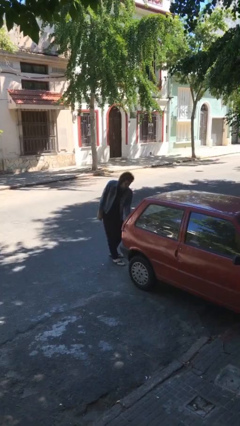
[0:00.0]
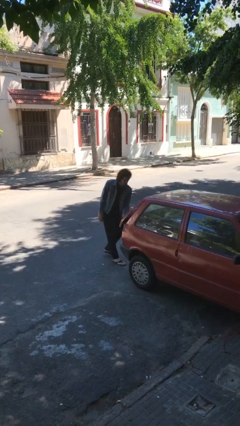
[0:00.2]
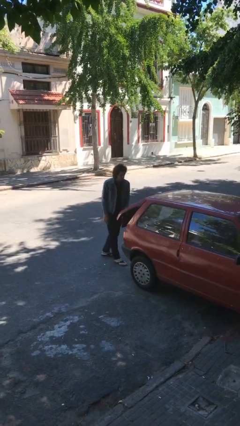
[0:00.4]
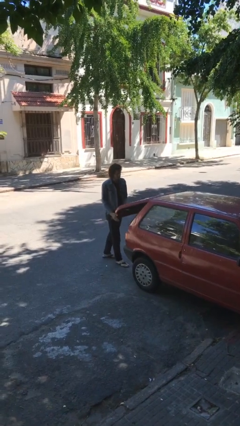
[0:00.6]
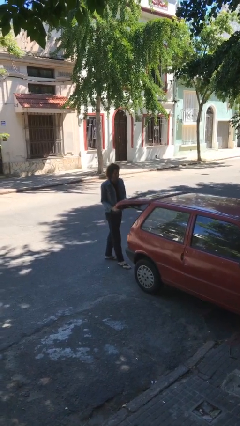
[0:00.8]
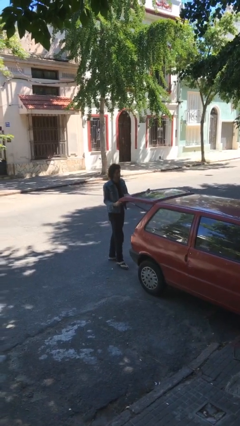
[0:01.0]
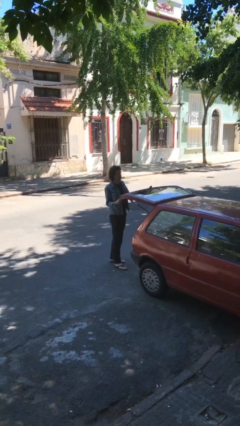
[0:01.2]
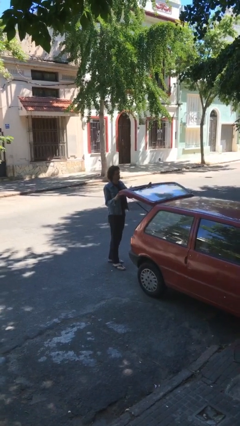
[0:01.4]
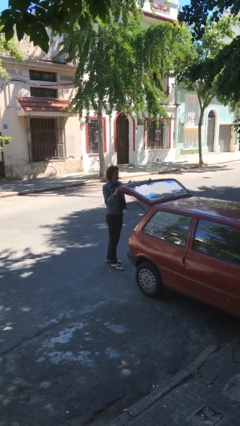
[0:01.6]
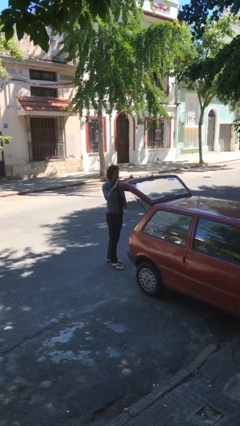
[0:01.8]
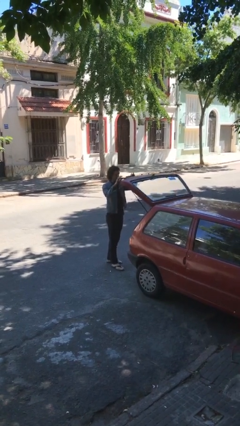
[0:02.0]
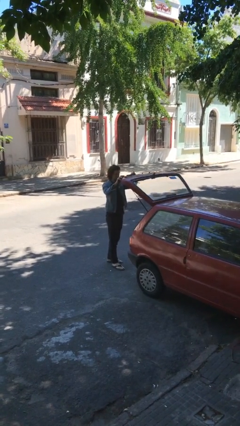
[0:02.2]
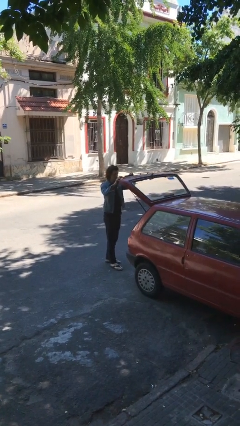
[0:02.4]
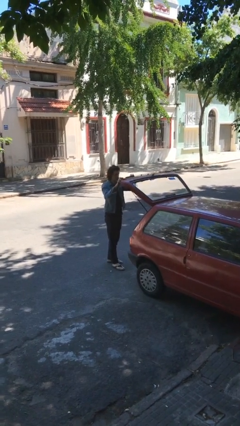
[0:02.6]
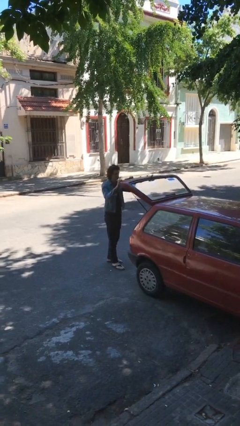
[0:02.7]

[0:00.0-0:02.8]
person opens car trunk

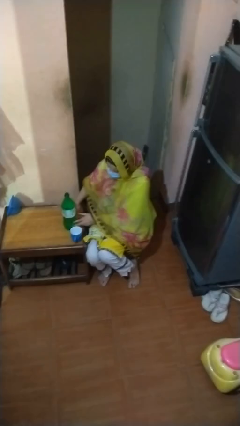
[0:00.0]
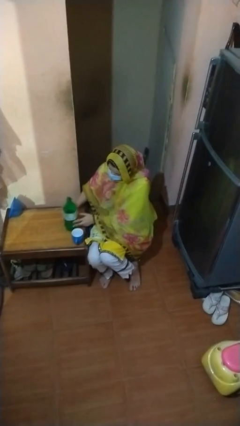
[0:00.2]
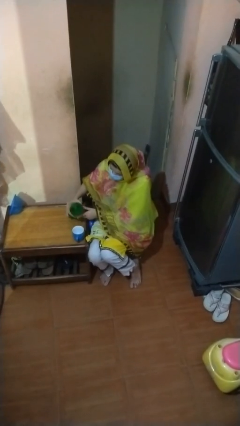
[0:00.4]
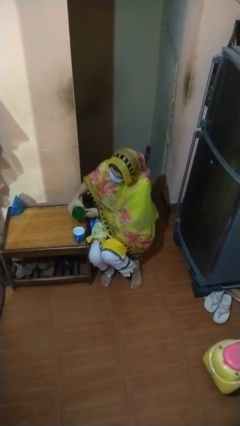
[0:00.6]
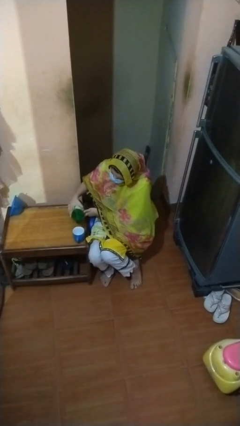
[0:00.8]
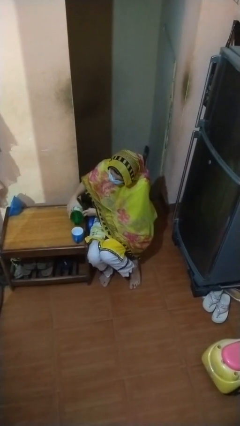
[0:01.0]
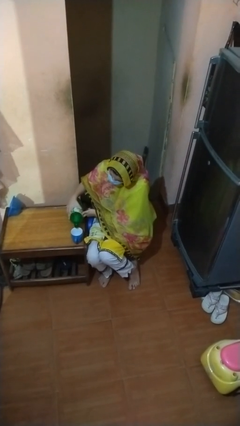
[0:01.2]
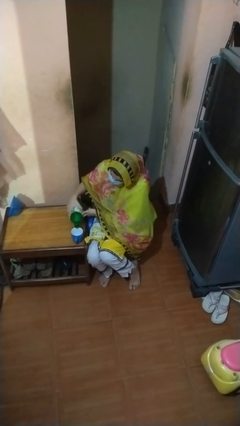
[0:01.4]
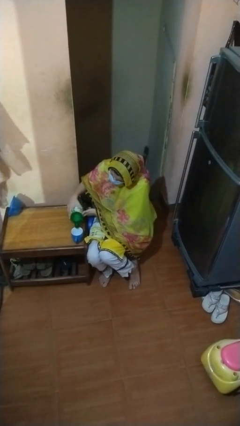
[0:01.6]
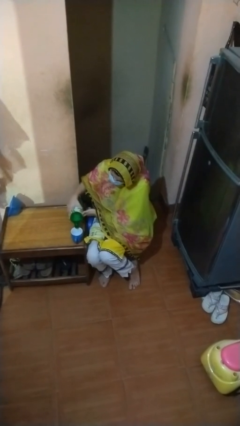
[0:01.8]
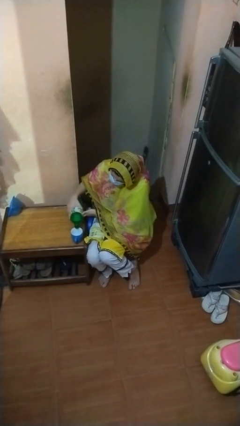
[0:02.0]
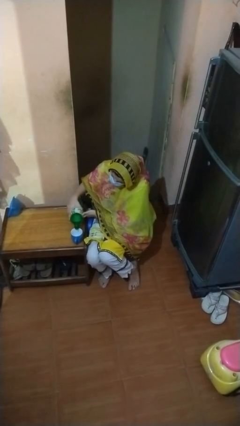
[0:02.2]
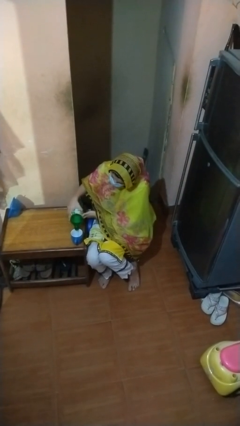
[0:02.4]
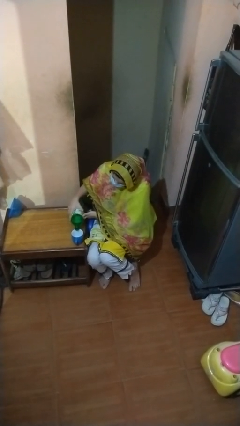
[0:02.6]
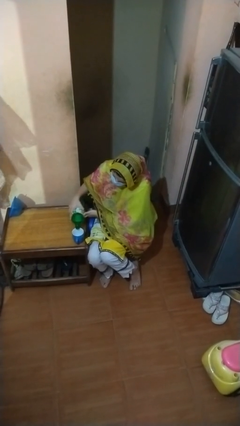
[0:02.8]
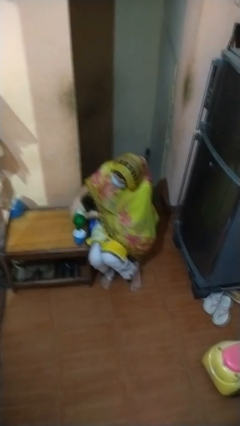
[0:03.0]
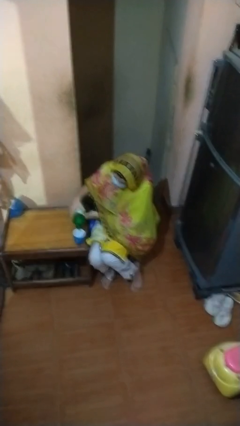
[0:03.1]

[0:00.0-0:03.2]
person pours liquid into cup

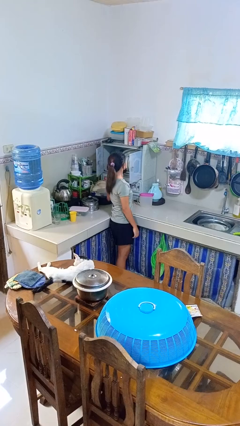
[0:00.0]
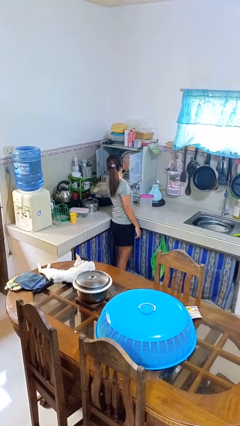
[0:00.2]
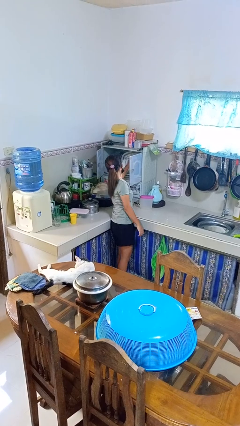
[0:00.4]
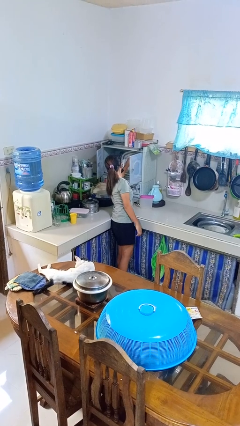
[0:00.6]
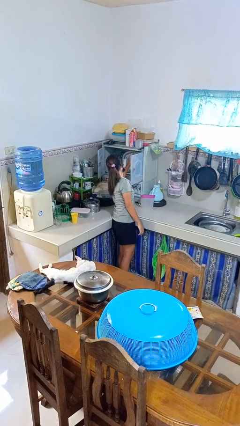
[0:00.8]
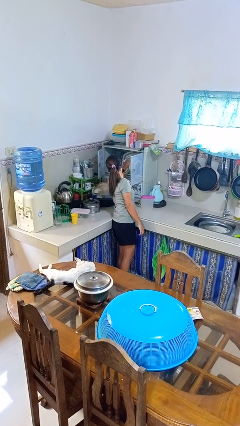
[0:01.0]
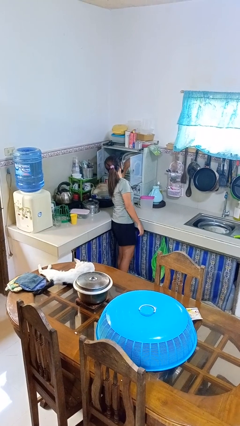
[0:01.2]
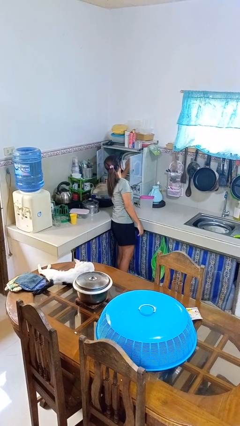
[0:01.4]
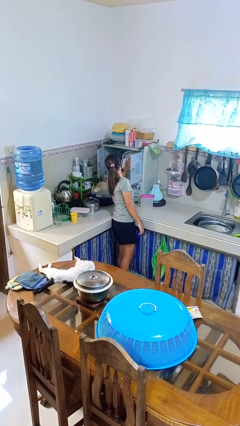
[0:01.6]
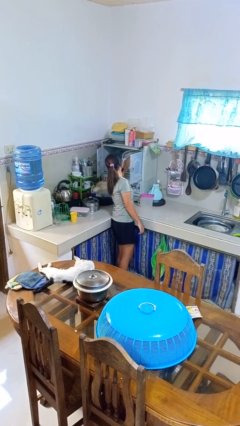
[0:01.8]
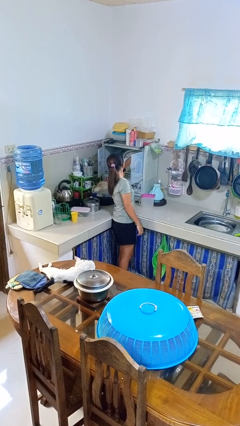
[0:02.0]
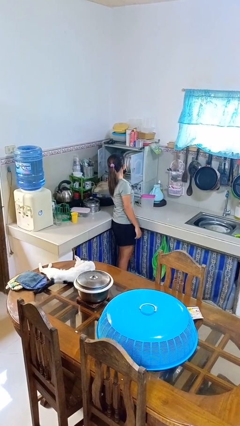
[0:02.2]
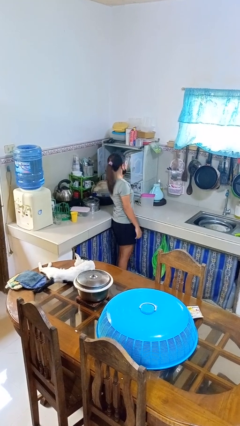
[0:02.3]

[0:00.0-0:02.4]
person searches in kitchen drawer

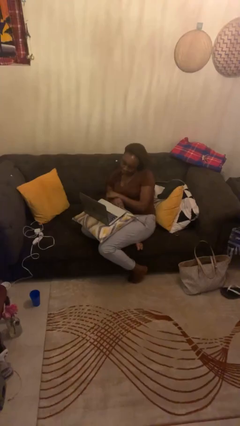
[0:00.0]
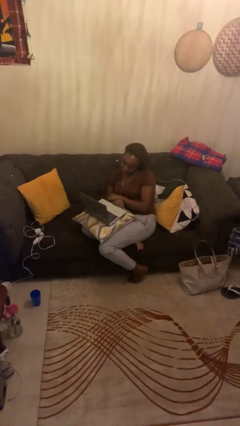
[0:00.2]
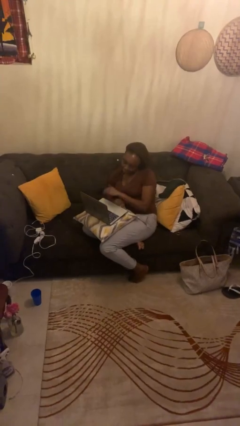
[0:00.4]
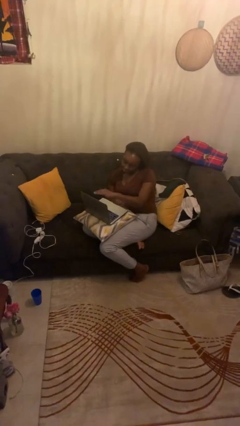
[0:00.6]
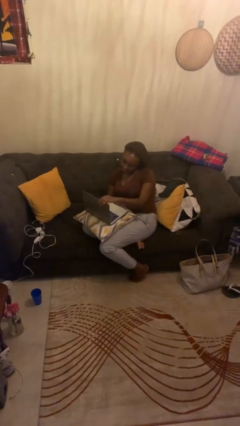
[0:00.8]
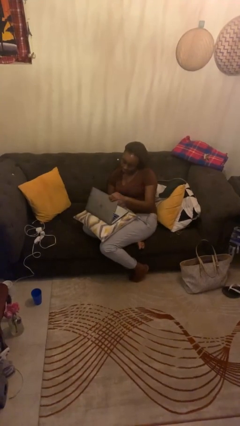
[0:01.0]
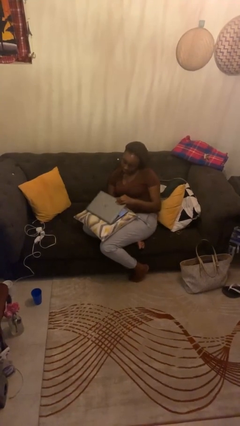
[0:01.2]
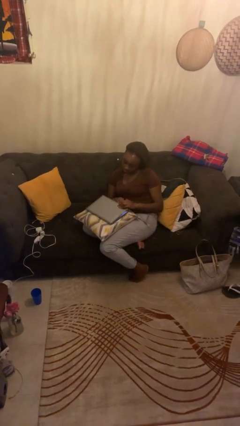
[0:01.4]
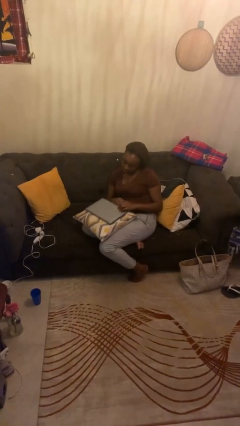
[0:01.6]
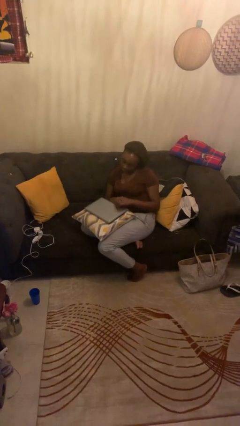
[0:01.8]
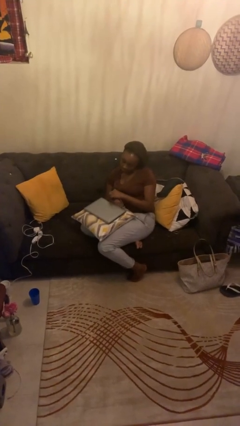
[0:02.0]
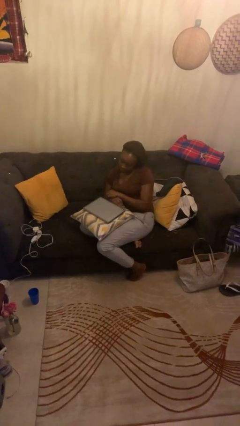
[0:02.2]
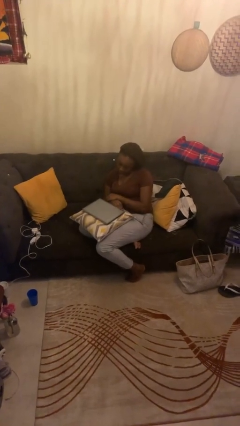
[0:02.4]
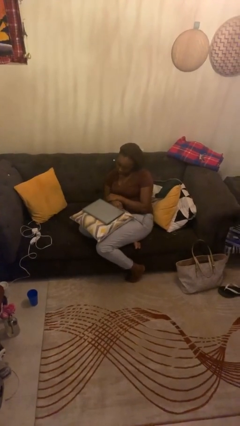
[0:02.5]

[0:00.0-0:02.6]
person closes laptop

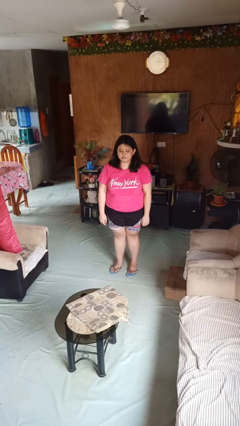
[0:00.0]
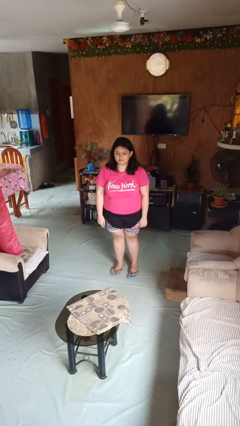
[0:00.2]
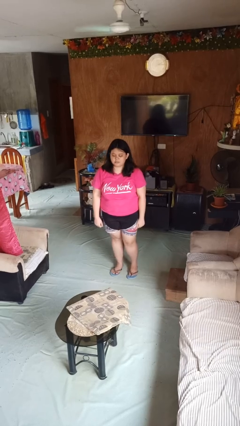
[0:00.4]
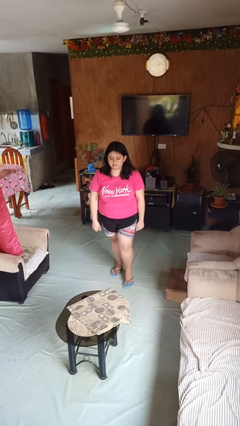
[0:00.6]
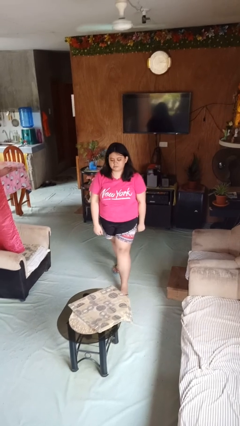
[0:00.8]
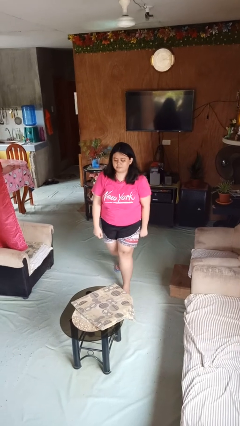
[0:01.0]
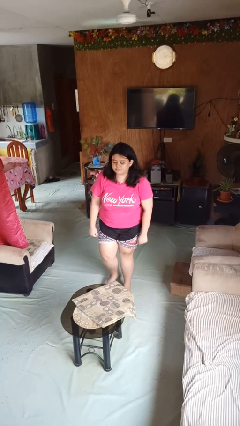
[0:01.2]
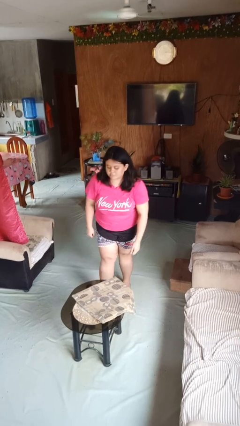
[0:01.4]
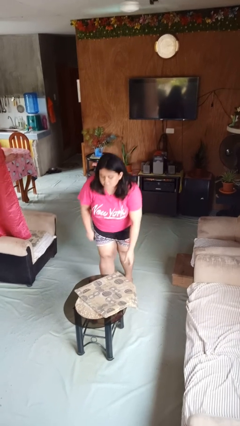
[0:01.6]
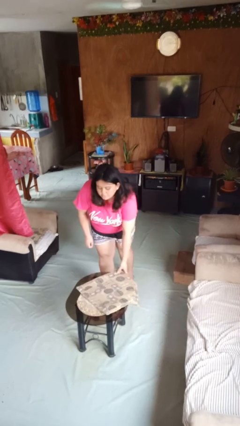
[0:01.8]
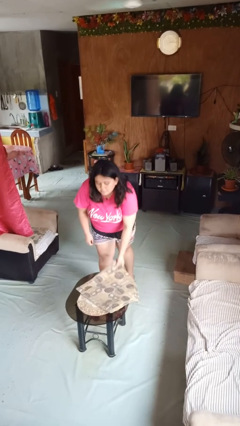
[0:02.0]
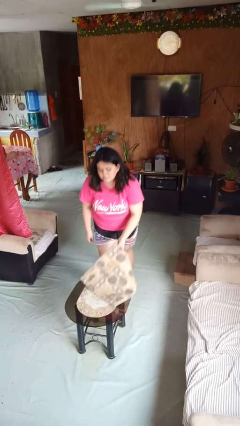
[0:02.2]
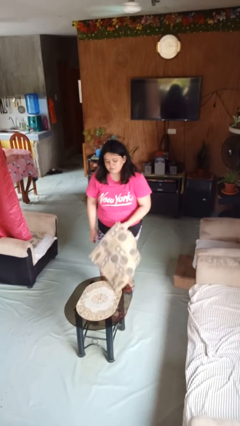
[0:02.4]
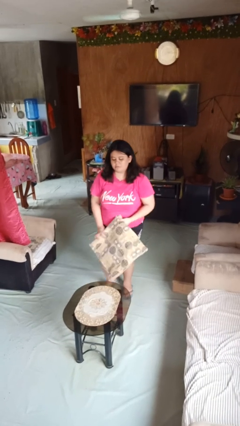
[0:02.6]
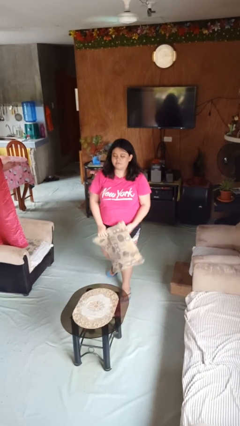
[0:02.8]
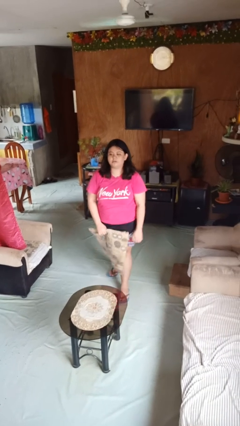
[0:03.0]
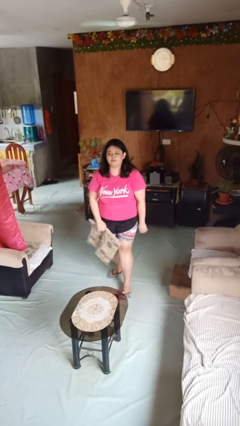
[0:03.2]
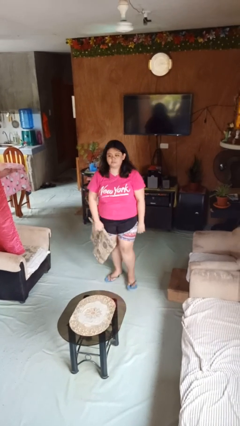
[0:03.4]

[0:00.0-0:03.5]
person picks up object from table

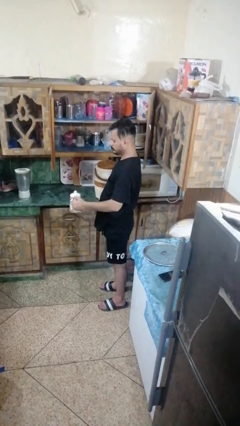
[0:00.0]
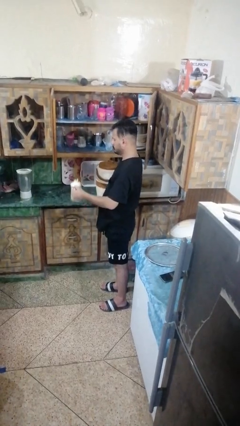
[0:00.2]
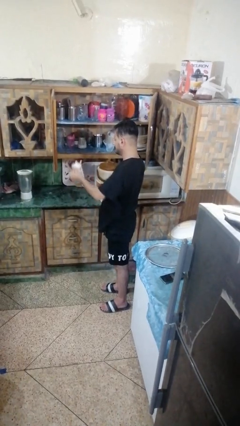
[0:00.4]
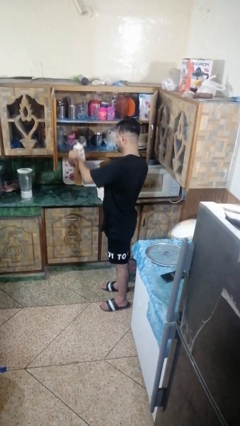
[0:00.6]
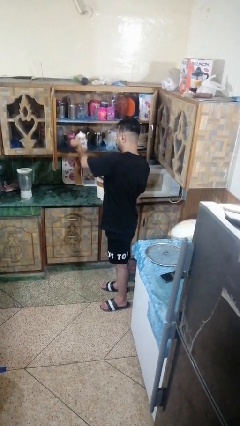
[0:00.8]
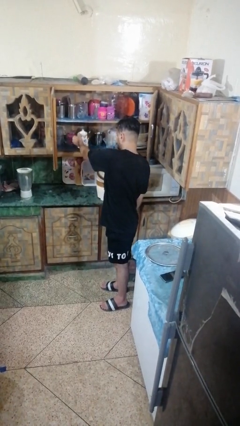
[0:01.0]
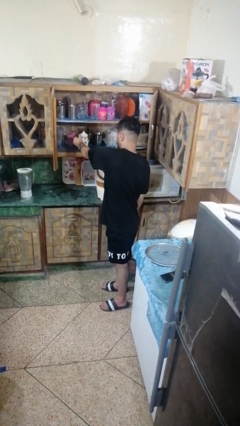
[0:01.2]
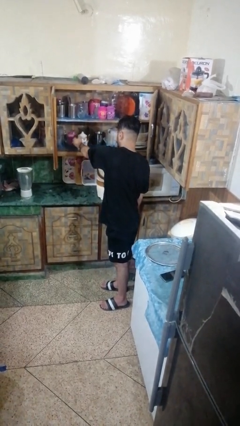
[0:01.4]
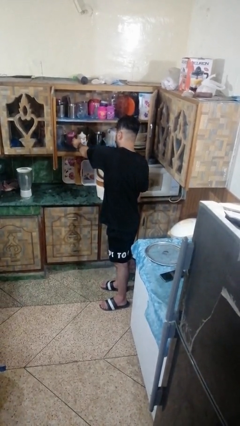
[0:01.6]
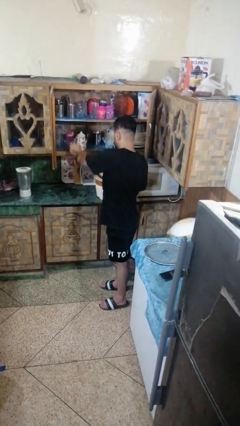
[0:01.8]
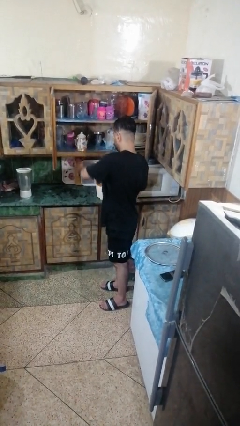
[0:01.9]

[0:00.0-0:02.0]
person puts down object into cabinet

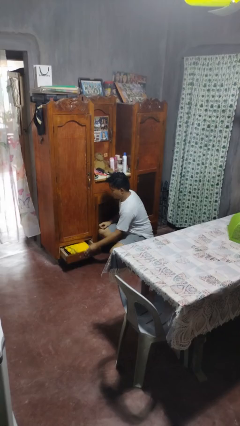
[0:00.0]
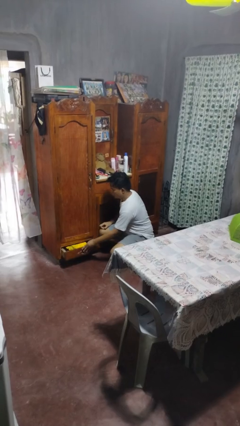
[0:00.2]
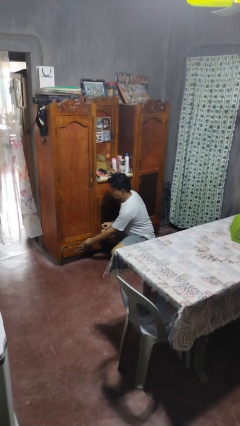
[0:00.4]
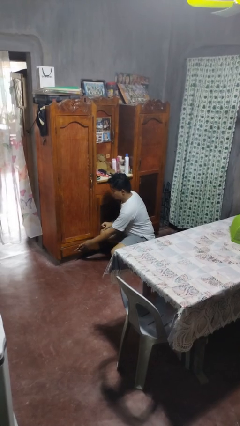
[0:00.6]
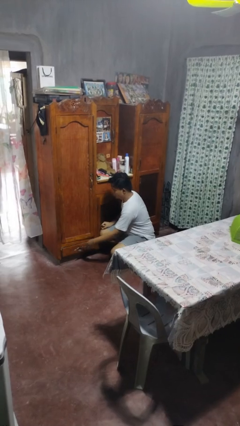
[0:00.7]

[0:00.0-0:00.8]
person closes dresser drawer
